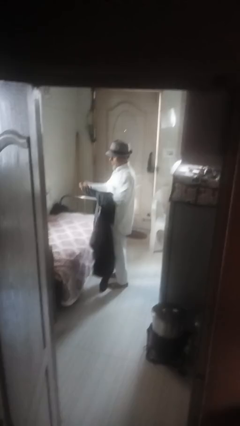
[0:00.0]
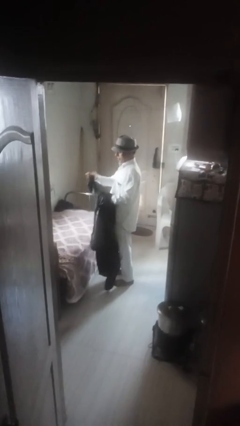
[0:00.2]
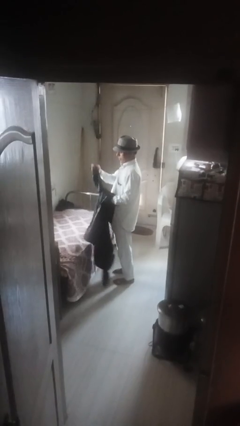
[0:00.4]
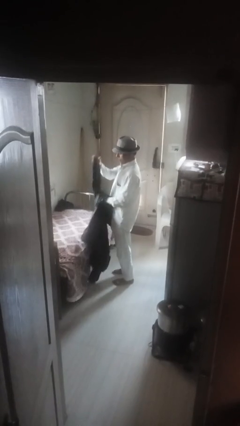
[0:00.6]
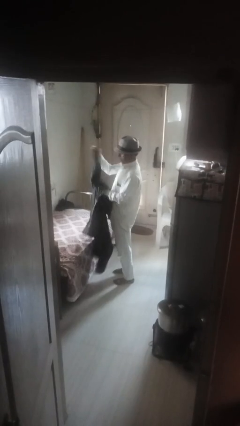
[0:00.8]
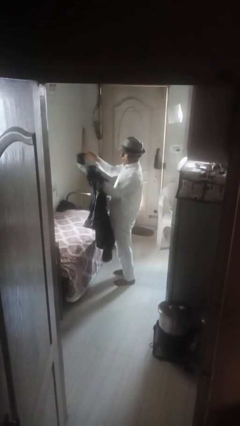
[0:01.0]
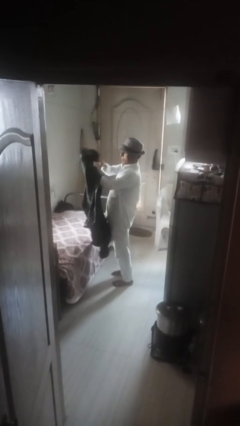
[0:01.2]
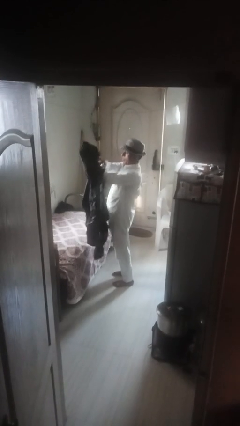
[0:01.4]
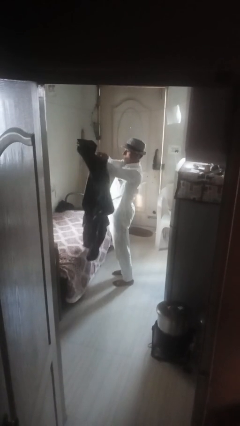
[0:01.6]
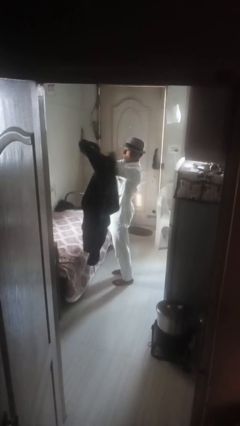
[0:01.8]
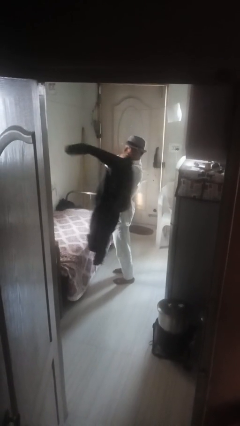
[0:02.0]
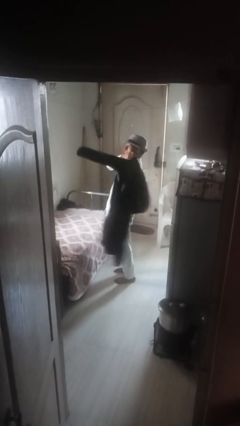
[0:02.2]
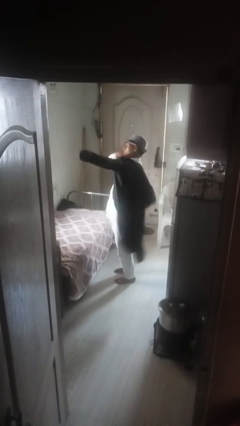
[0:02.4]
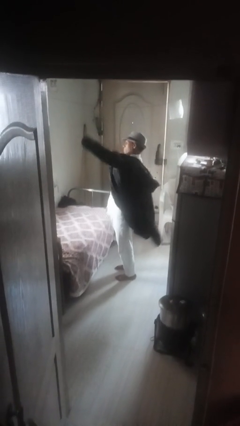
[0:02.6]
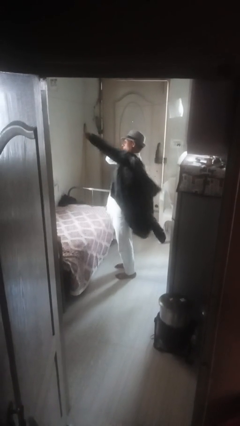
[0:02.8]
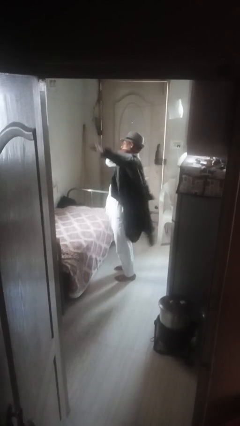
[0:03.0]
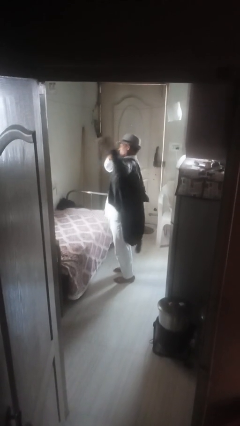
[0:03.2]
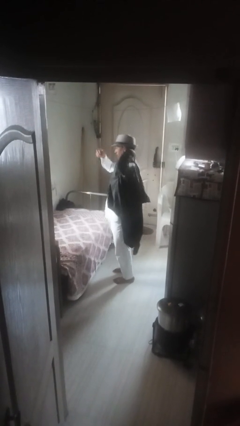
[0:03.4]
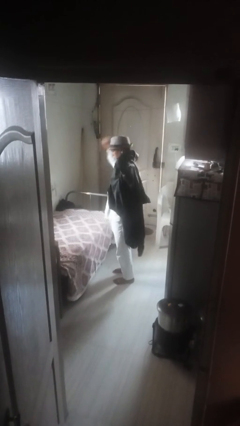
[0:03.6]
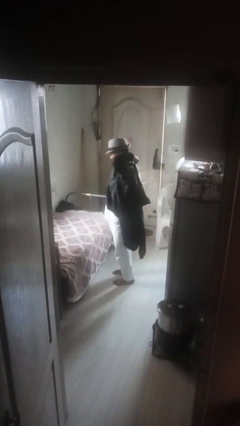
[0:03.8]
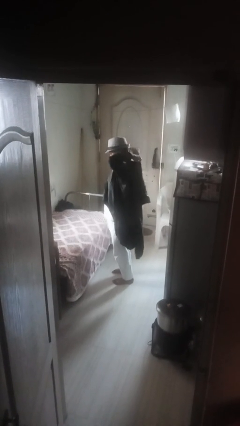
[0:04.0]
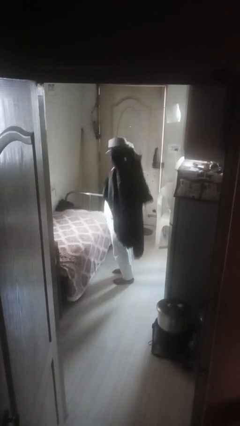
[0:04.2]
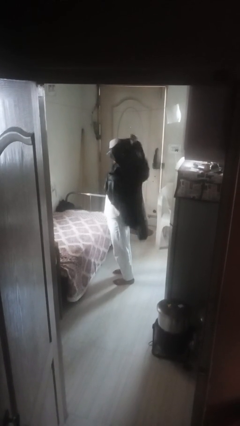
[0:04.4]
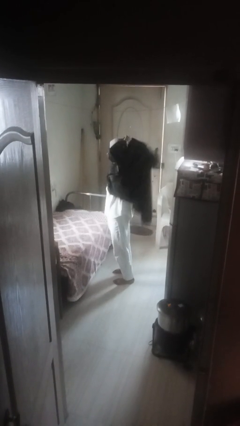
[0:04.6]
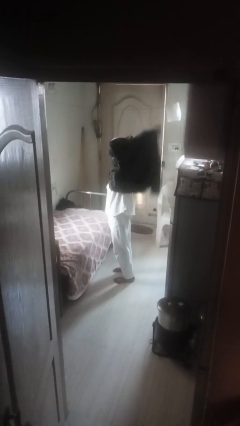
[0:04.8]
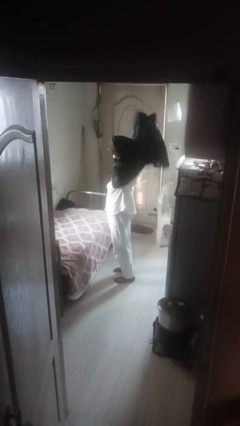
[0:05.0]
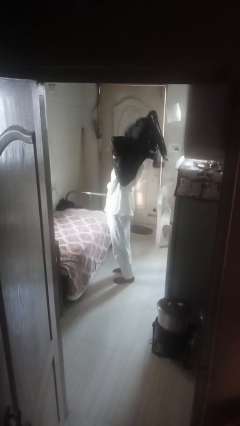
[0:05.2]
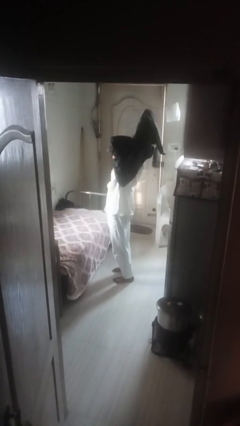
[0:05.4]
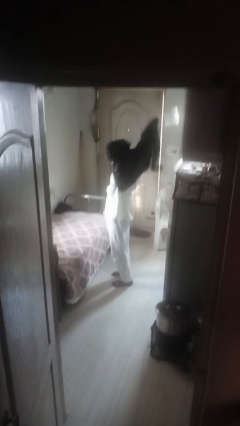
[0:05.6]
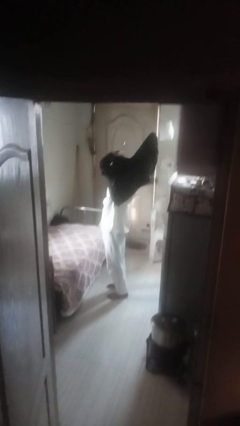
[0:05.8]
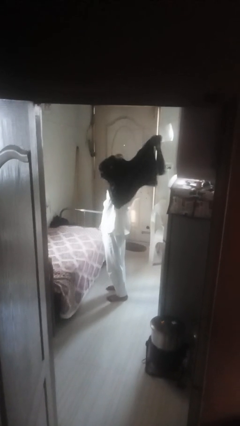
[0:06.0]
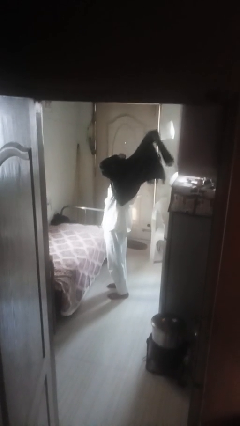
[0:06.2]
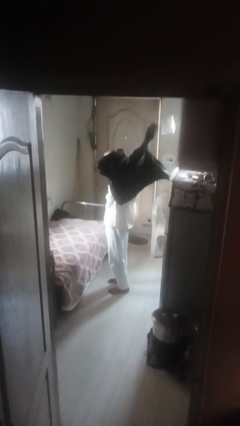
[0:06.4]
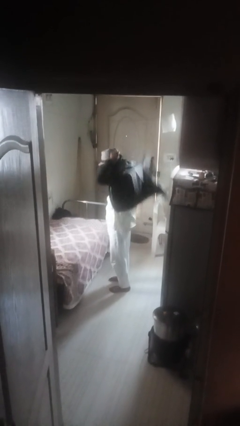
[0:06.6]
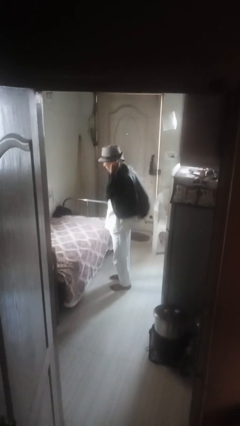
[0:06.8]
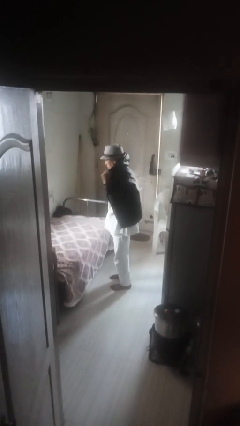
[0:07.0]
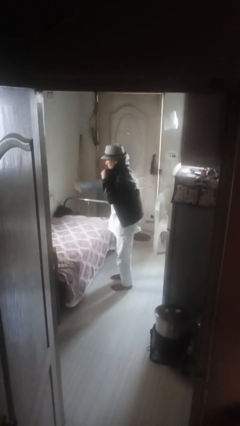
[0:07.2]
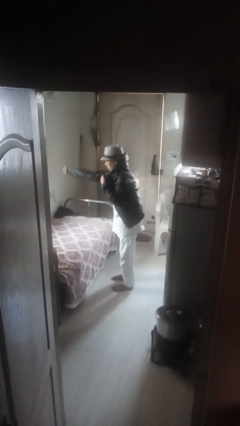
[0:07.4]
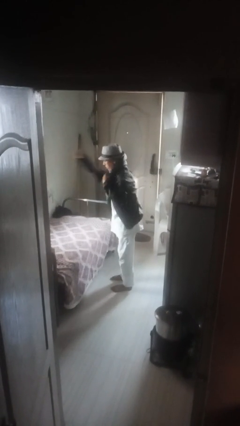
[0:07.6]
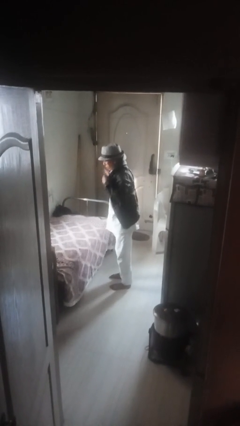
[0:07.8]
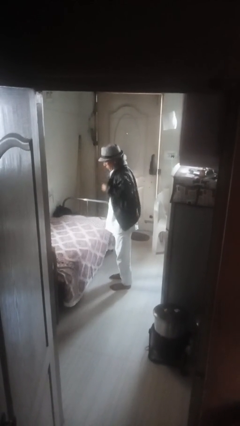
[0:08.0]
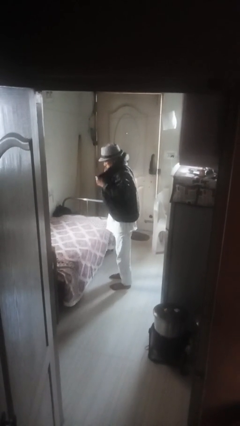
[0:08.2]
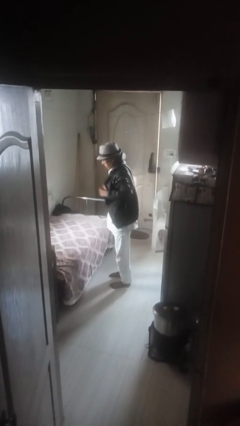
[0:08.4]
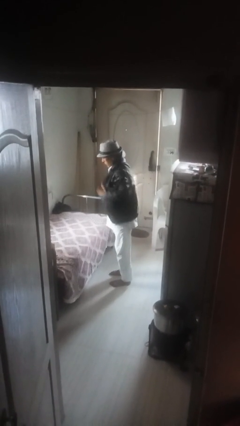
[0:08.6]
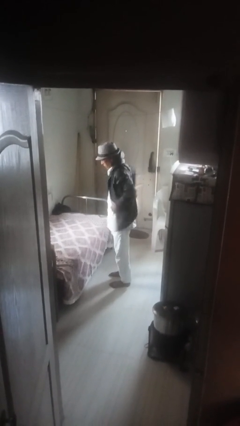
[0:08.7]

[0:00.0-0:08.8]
person puts on jacket

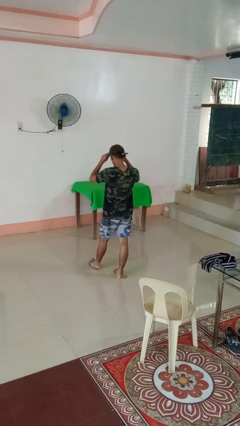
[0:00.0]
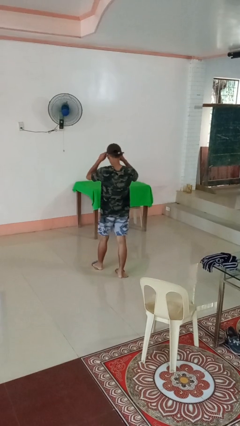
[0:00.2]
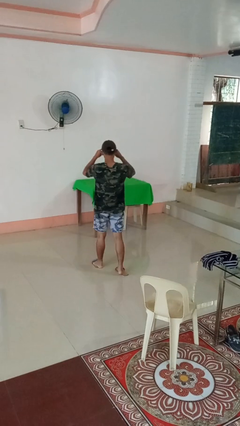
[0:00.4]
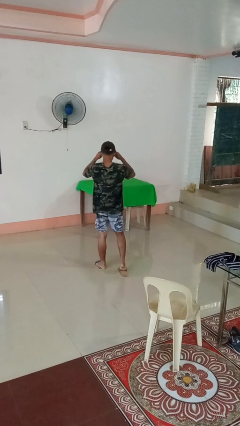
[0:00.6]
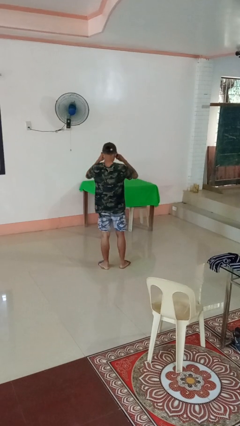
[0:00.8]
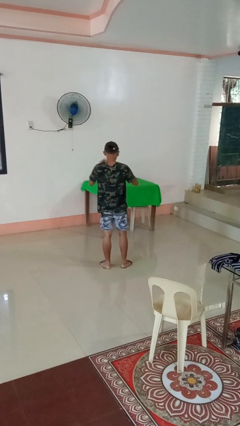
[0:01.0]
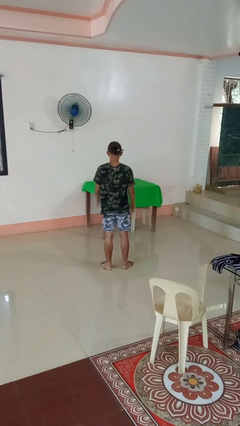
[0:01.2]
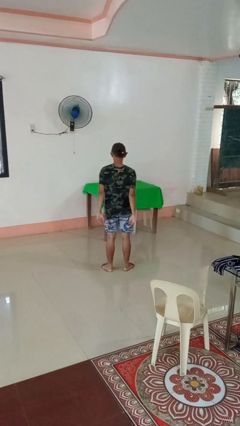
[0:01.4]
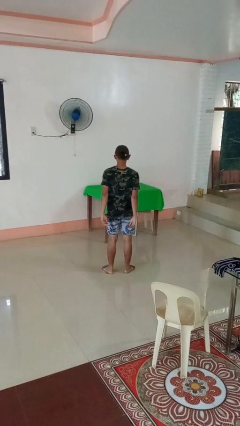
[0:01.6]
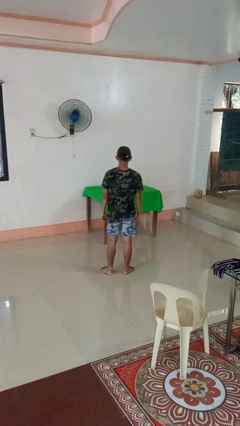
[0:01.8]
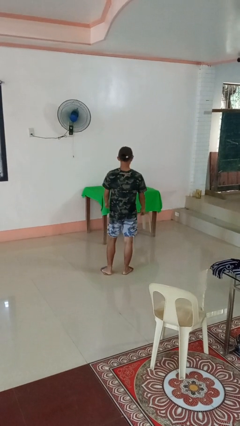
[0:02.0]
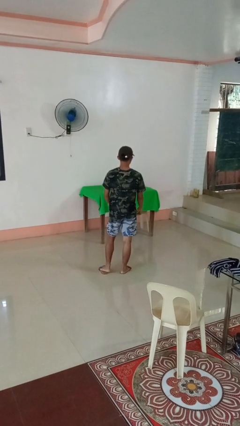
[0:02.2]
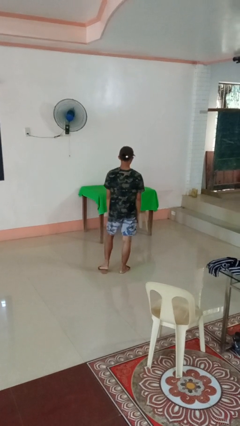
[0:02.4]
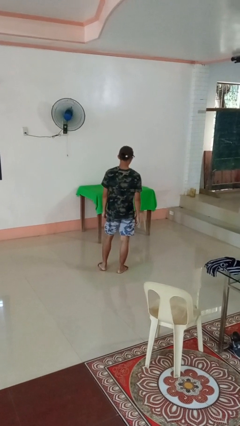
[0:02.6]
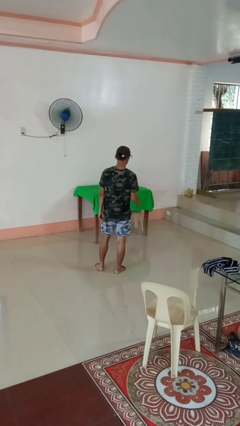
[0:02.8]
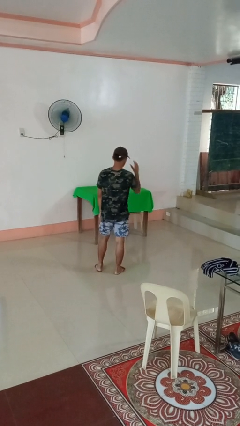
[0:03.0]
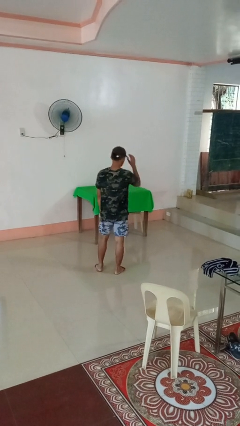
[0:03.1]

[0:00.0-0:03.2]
person puts on hat

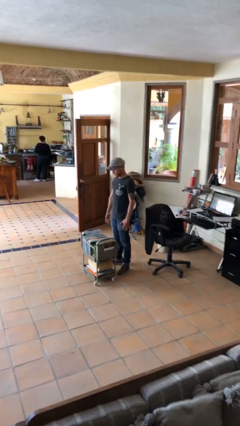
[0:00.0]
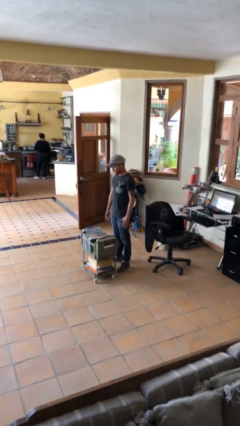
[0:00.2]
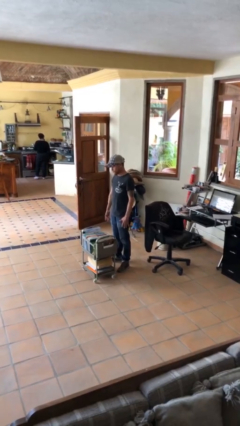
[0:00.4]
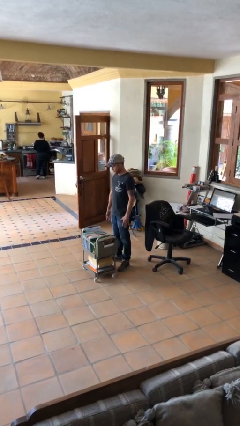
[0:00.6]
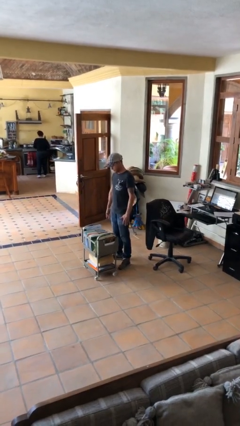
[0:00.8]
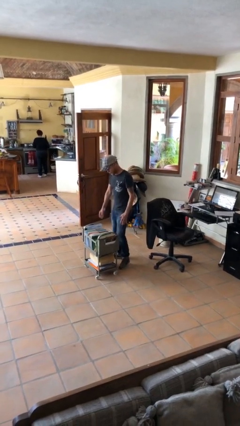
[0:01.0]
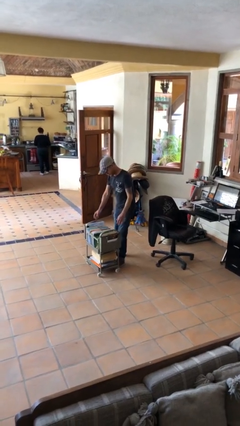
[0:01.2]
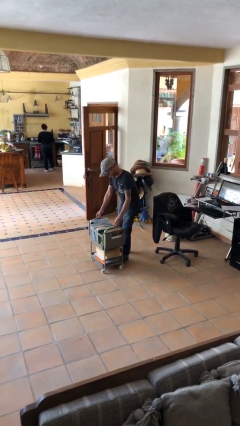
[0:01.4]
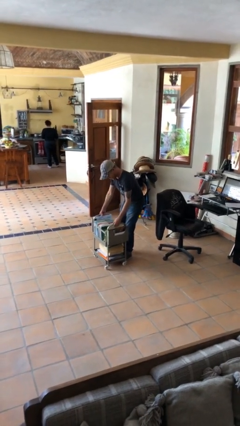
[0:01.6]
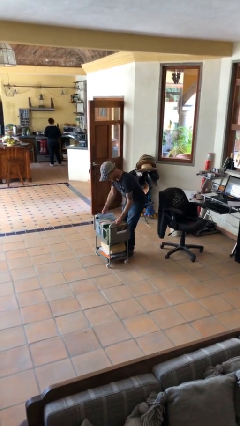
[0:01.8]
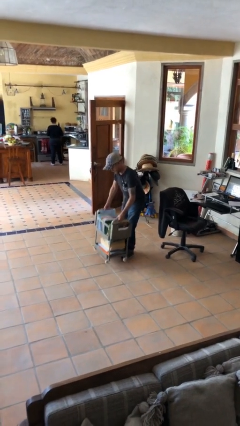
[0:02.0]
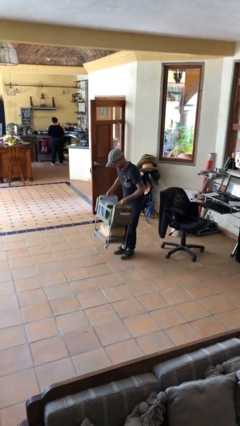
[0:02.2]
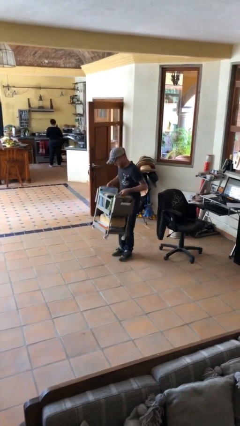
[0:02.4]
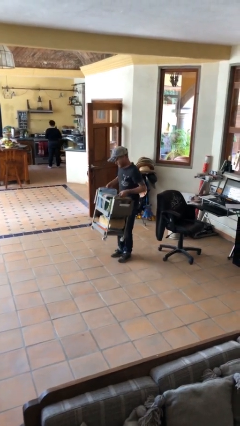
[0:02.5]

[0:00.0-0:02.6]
person picks up object from floor

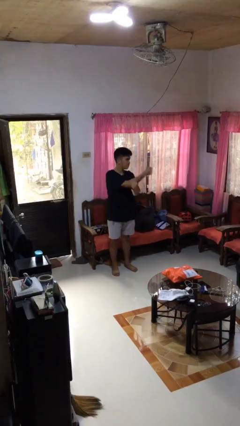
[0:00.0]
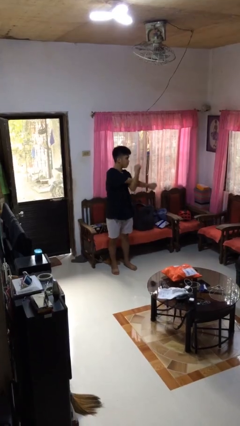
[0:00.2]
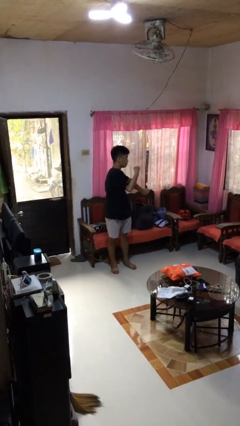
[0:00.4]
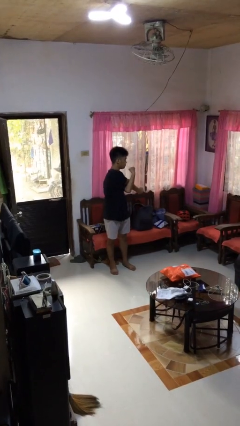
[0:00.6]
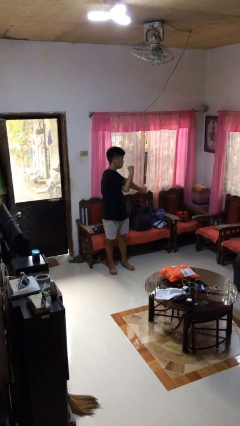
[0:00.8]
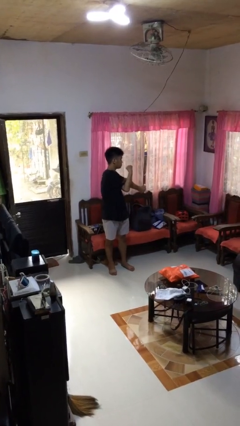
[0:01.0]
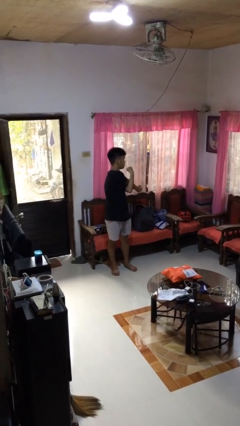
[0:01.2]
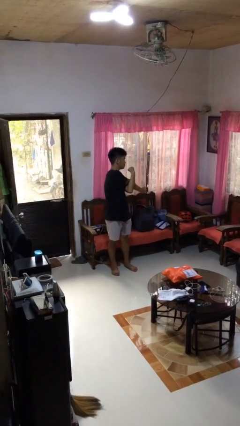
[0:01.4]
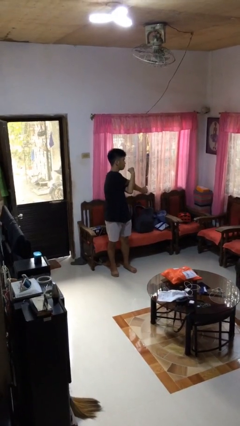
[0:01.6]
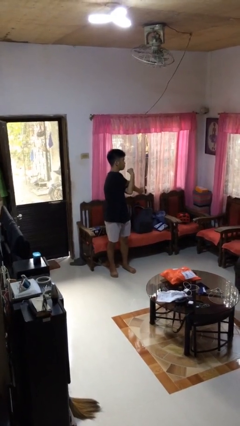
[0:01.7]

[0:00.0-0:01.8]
person stretches arms to side

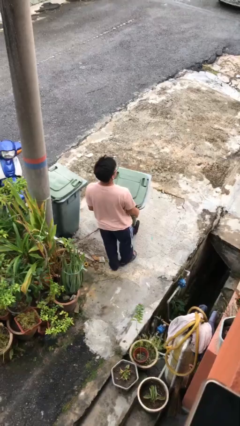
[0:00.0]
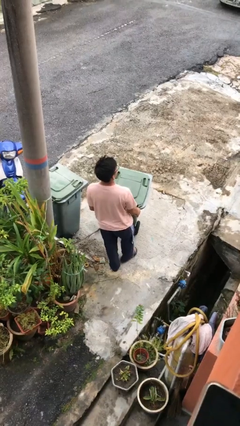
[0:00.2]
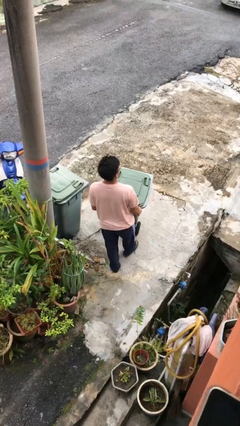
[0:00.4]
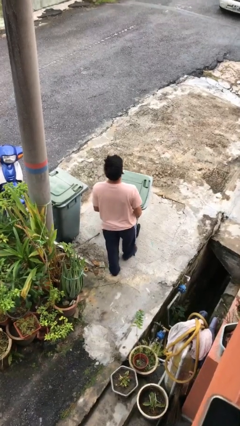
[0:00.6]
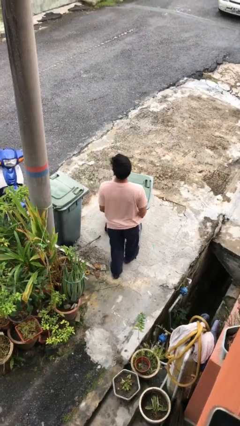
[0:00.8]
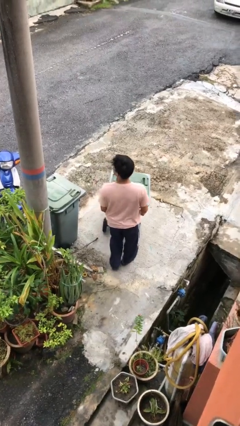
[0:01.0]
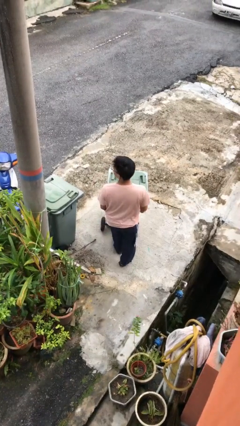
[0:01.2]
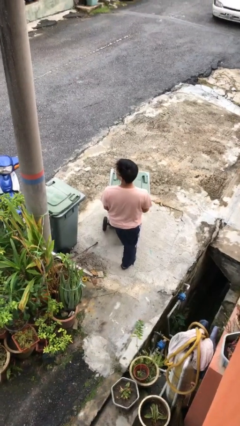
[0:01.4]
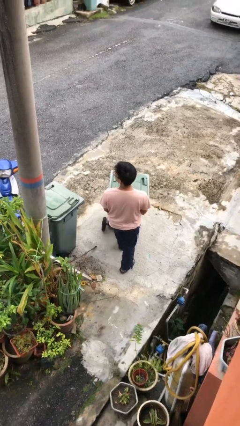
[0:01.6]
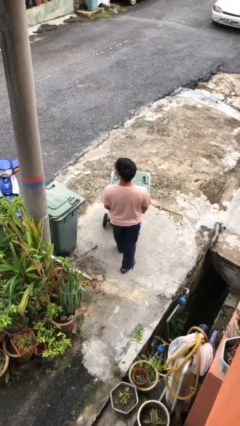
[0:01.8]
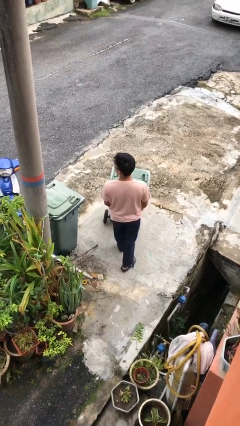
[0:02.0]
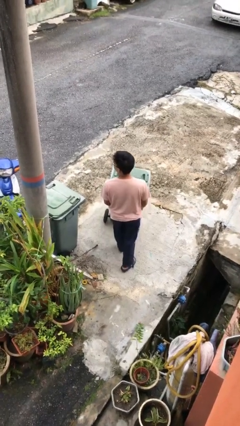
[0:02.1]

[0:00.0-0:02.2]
person pushes wheeled trashcan
